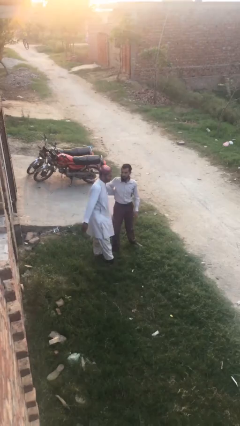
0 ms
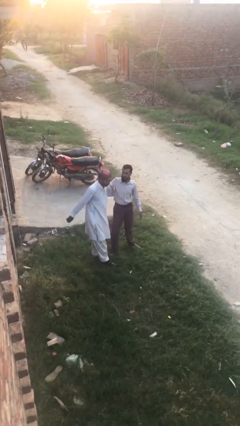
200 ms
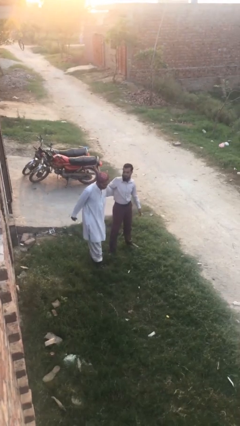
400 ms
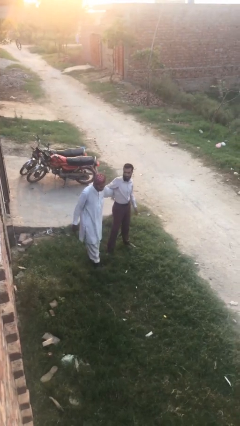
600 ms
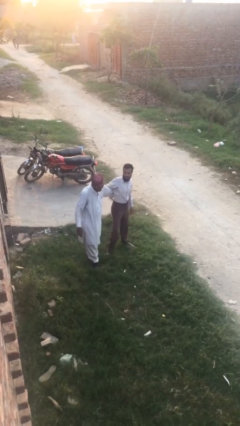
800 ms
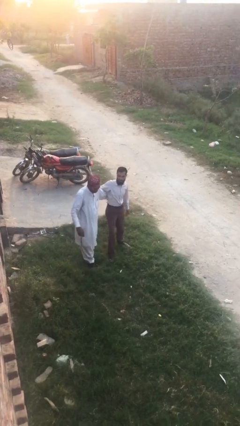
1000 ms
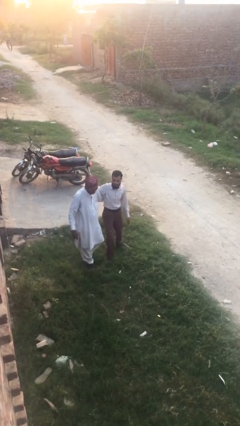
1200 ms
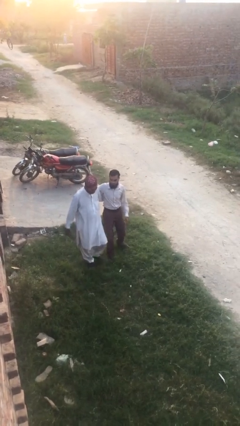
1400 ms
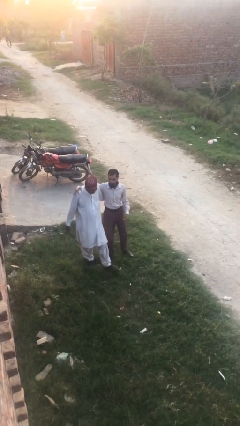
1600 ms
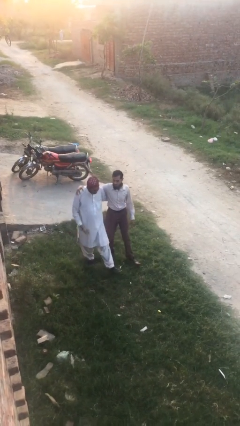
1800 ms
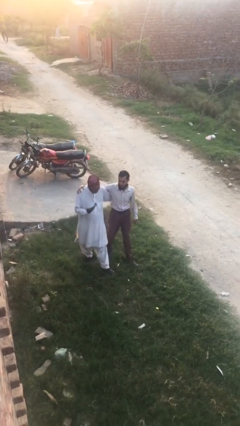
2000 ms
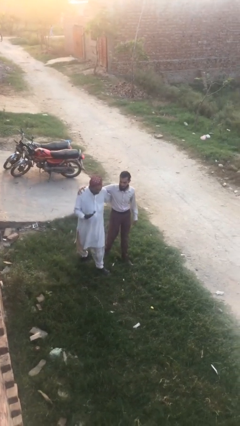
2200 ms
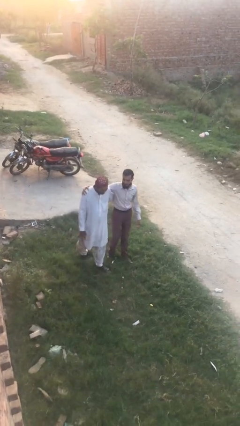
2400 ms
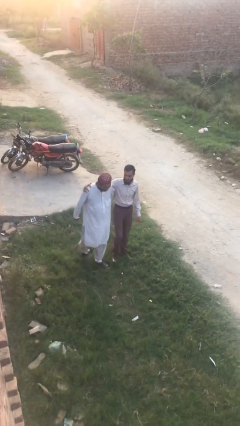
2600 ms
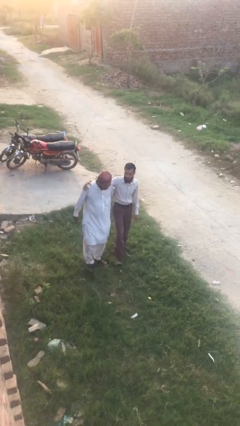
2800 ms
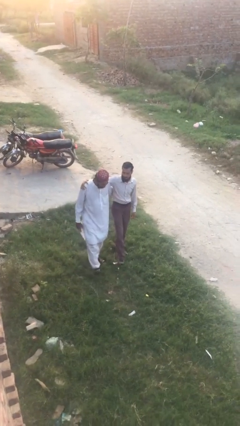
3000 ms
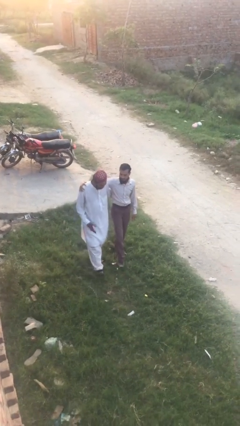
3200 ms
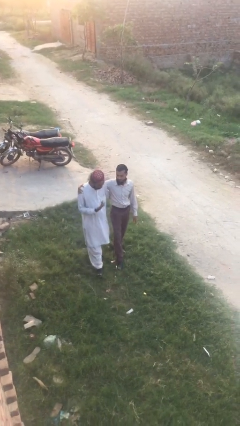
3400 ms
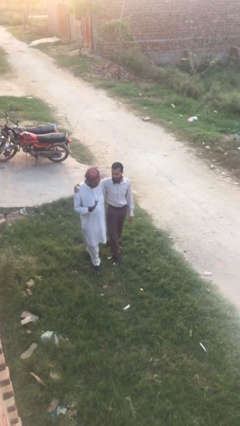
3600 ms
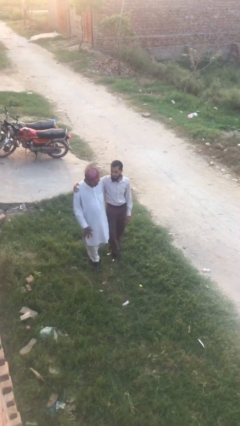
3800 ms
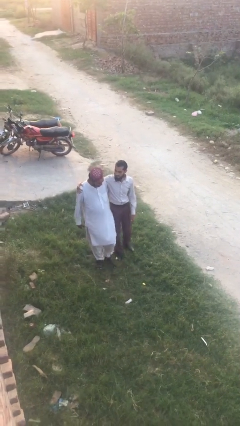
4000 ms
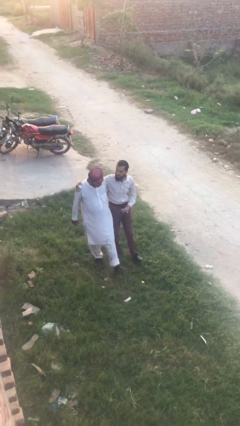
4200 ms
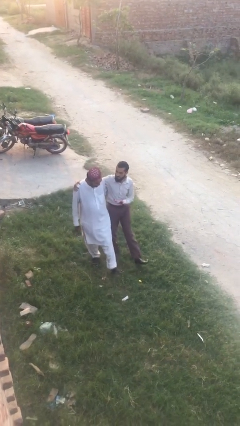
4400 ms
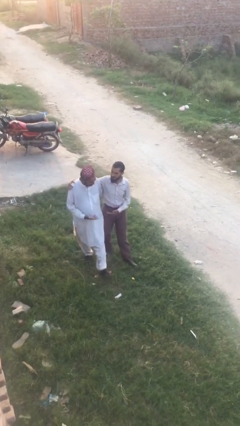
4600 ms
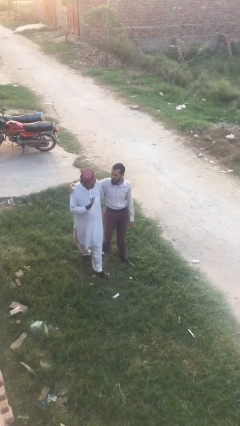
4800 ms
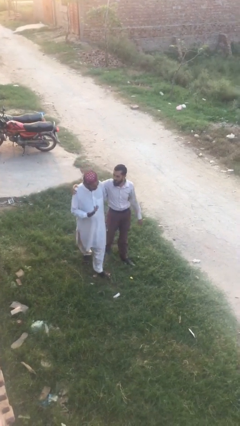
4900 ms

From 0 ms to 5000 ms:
person talks to person

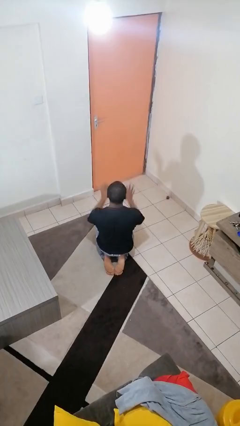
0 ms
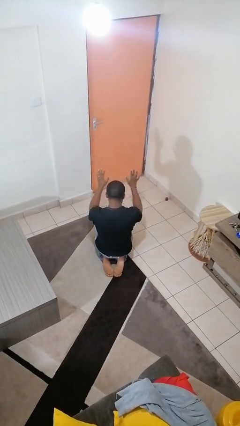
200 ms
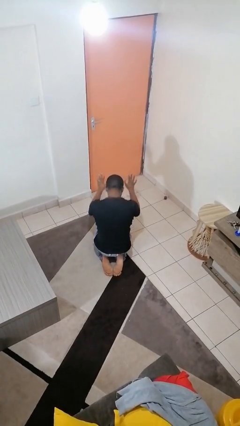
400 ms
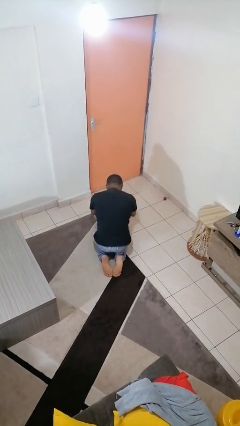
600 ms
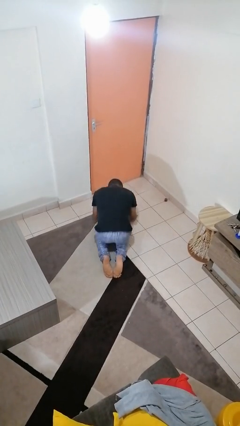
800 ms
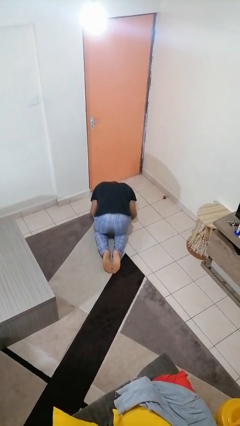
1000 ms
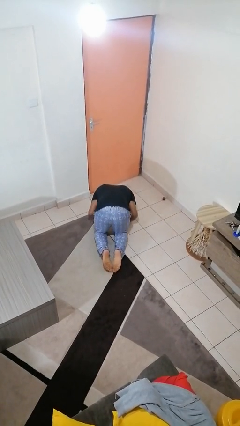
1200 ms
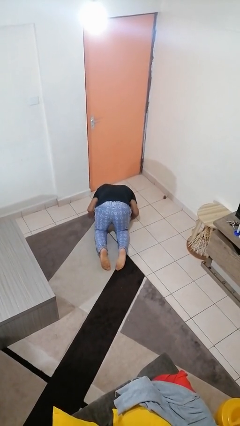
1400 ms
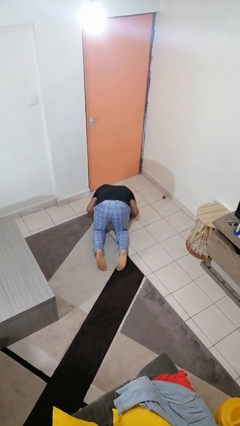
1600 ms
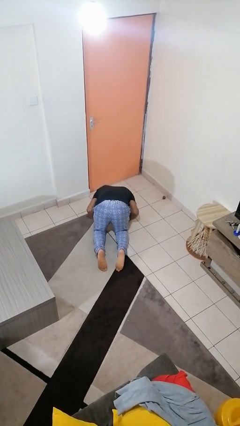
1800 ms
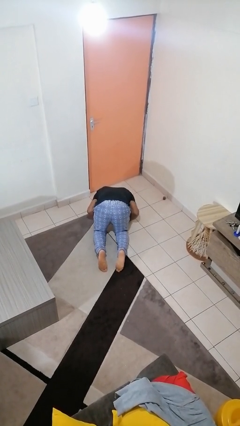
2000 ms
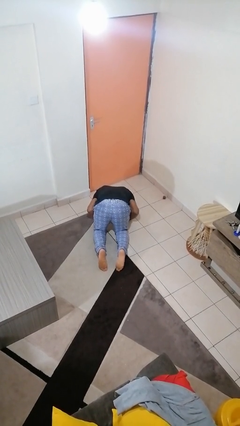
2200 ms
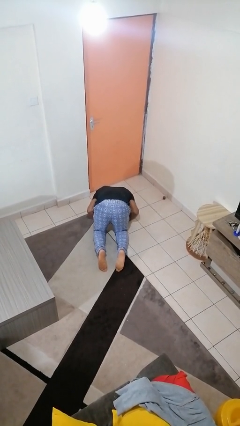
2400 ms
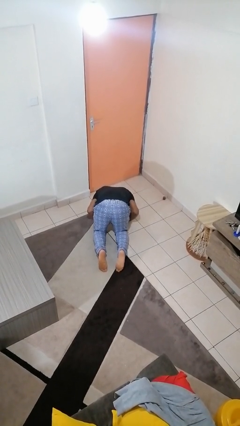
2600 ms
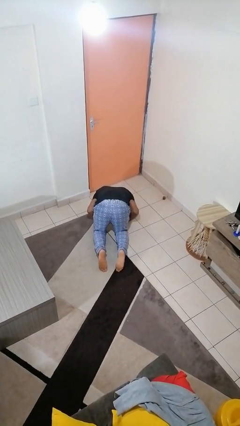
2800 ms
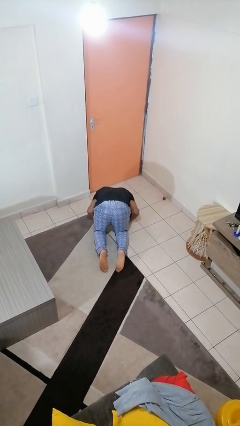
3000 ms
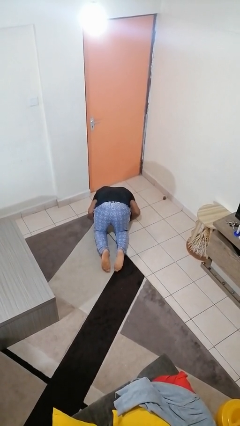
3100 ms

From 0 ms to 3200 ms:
person prays

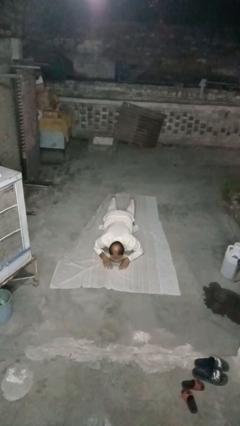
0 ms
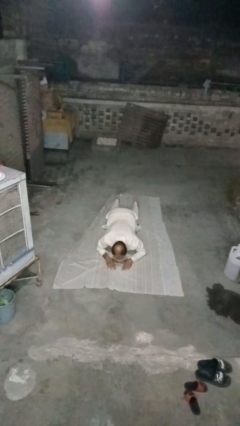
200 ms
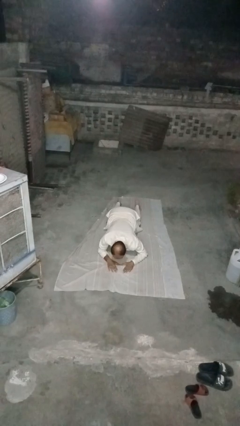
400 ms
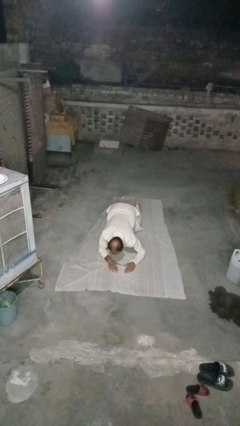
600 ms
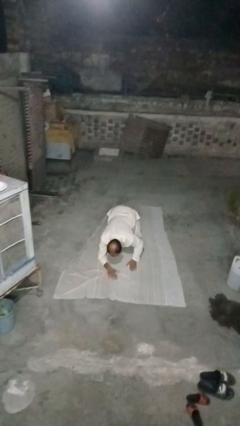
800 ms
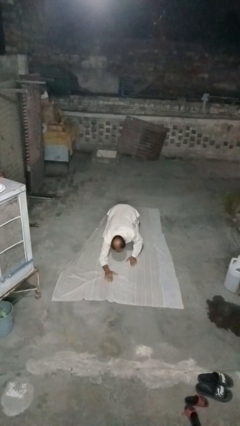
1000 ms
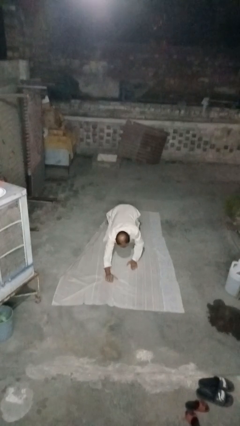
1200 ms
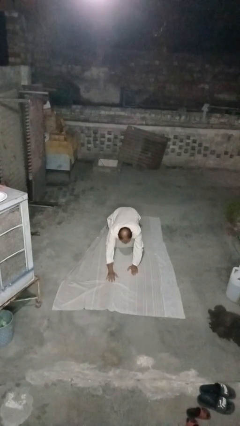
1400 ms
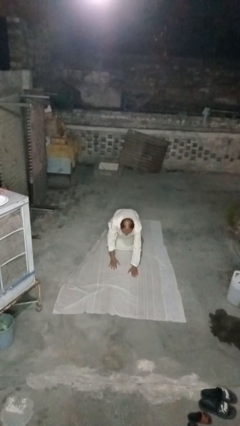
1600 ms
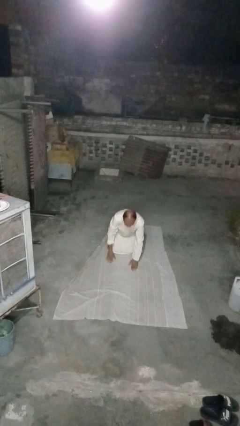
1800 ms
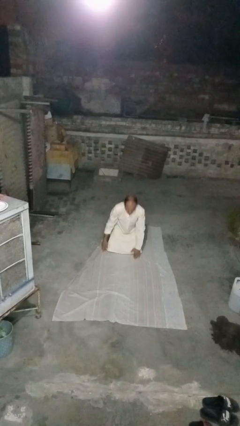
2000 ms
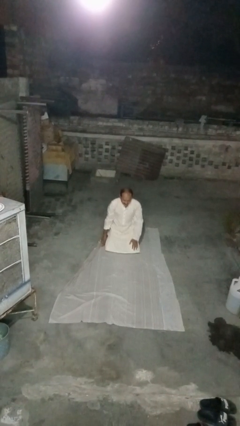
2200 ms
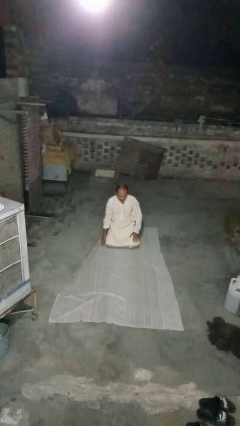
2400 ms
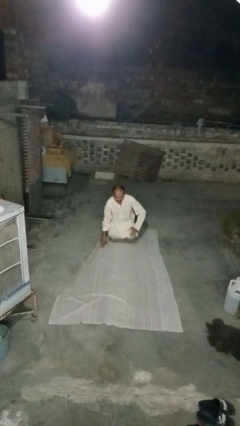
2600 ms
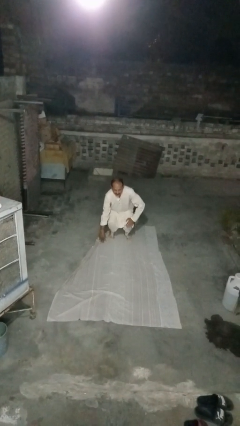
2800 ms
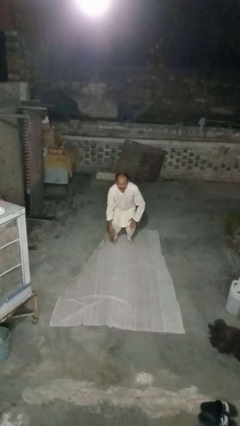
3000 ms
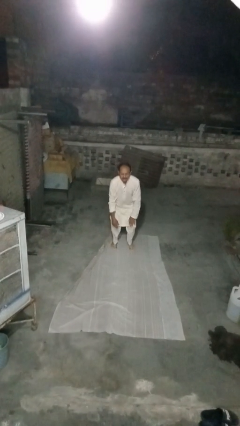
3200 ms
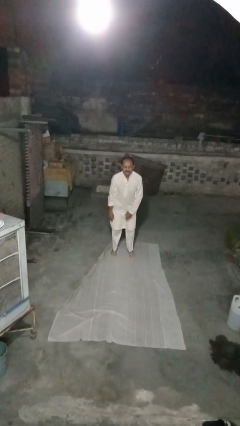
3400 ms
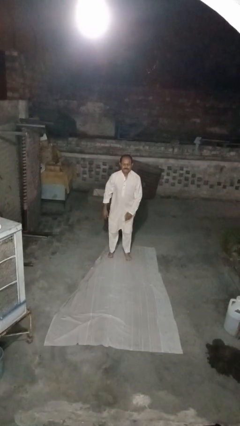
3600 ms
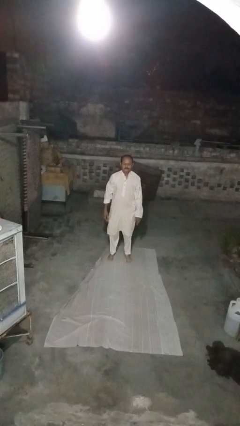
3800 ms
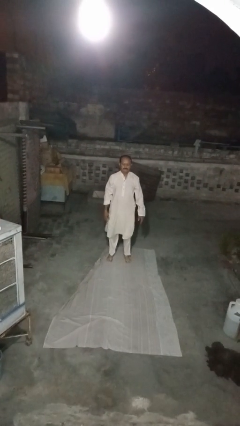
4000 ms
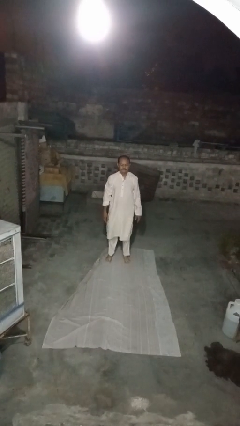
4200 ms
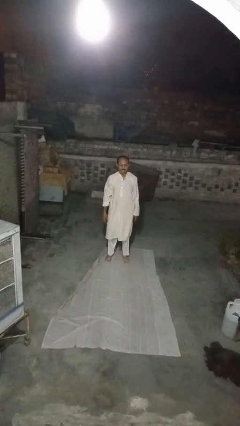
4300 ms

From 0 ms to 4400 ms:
person stands up from floor

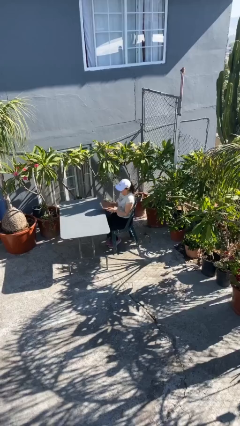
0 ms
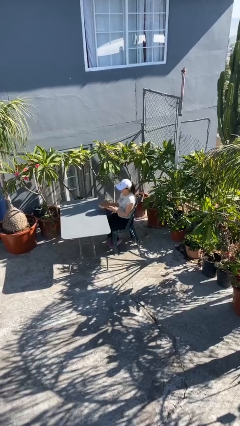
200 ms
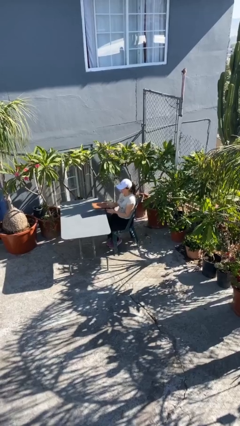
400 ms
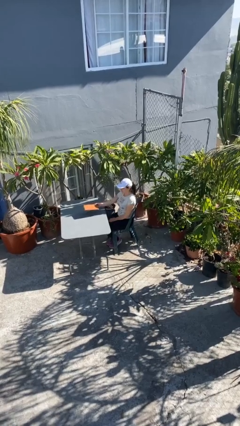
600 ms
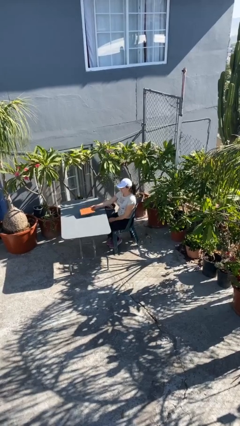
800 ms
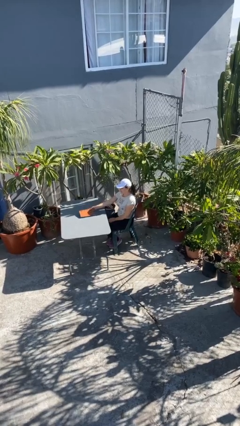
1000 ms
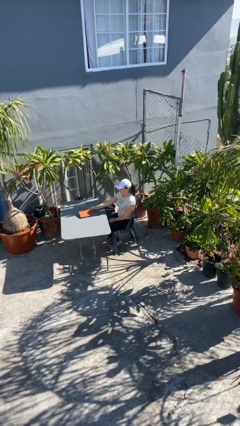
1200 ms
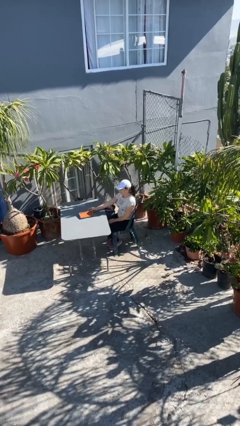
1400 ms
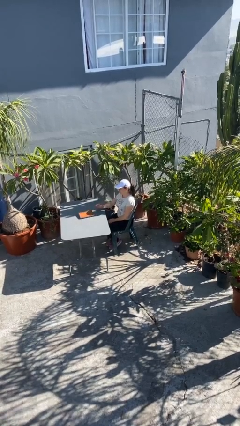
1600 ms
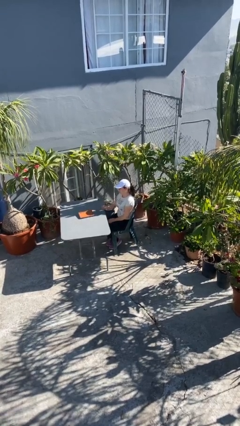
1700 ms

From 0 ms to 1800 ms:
person puts down object on table

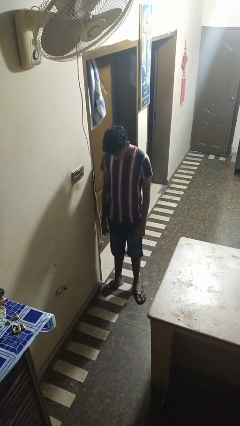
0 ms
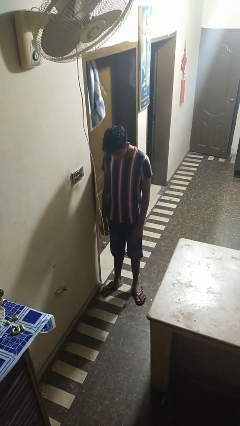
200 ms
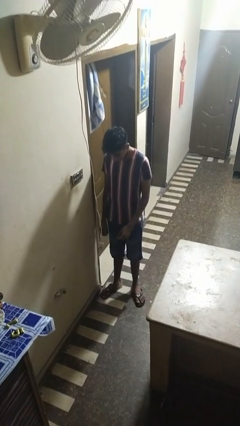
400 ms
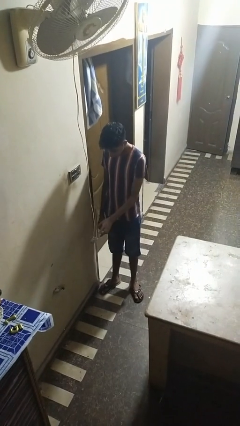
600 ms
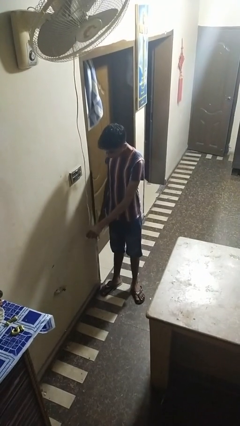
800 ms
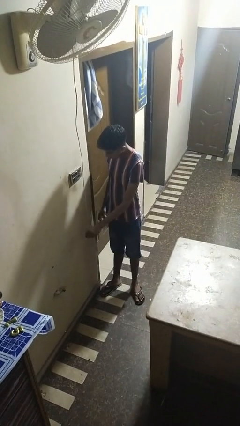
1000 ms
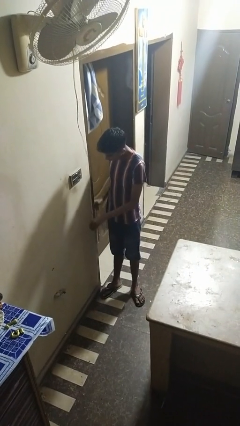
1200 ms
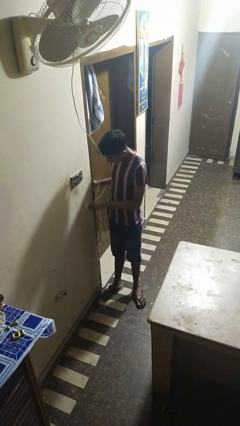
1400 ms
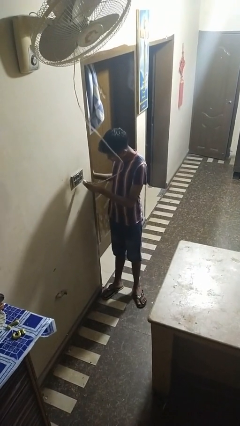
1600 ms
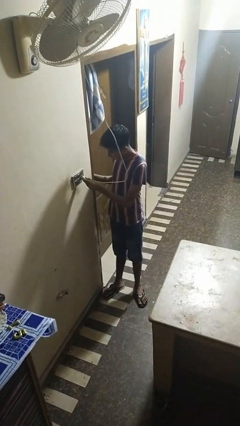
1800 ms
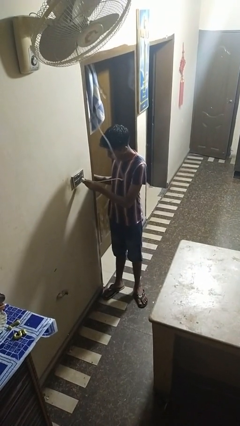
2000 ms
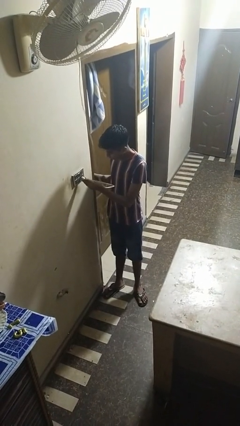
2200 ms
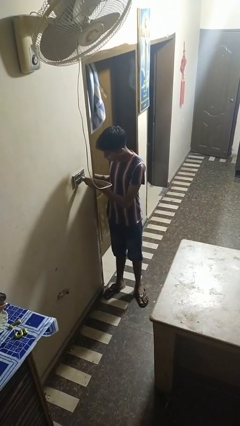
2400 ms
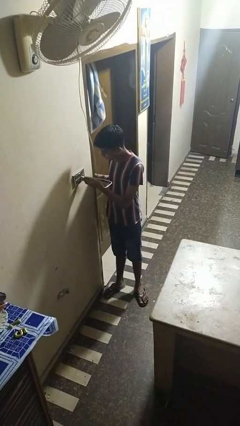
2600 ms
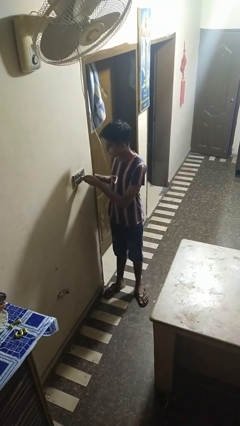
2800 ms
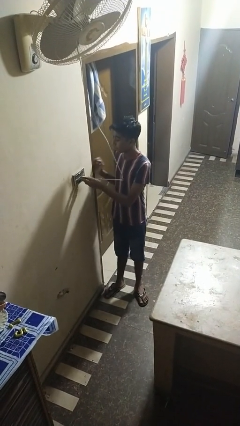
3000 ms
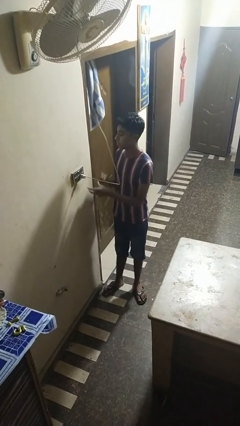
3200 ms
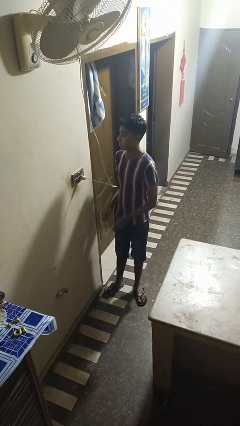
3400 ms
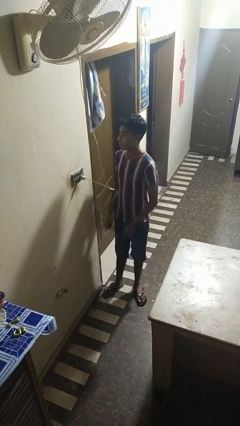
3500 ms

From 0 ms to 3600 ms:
person plugs into electrical socket
